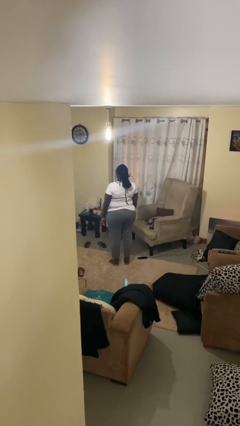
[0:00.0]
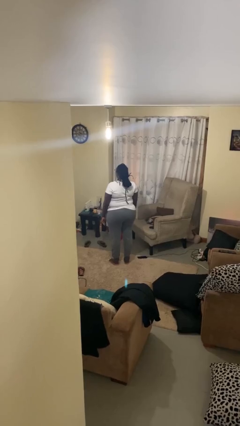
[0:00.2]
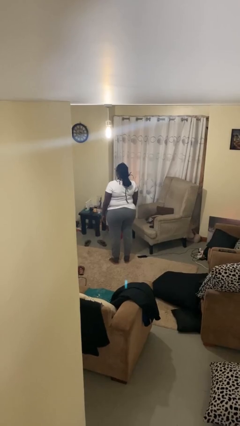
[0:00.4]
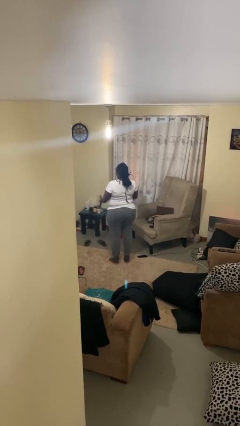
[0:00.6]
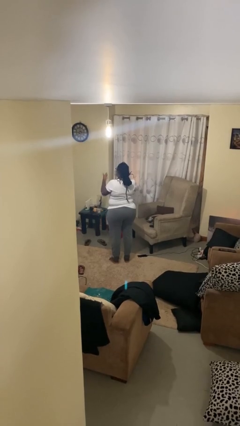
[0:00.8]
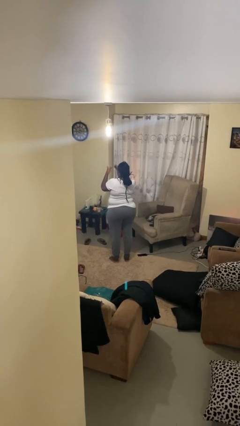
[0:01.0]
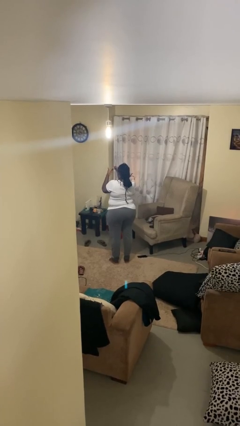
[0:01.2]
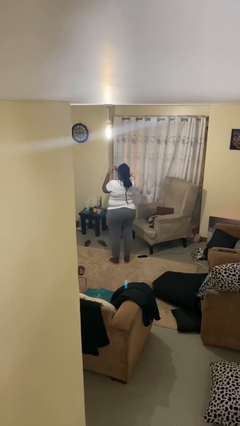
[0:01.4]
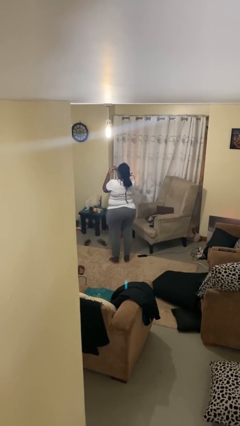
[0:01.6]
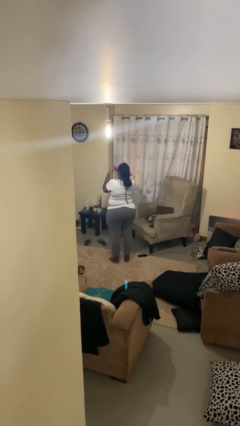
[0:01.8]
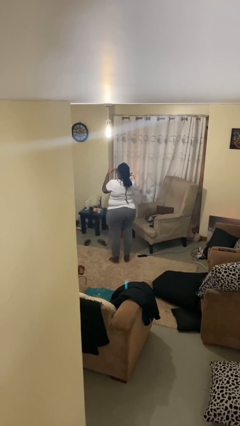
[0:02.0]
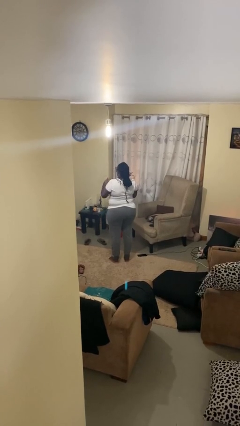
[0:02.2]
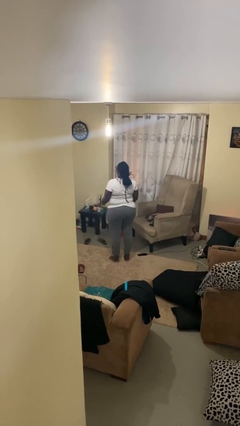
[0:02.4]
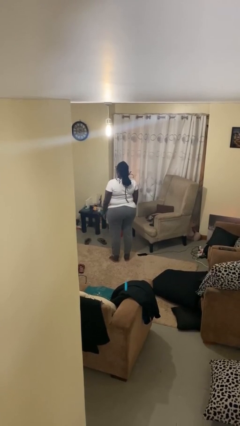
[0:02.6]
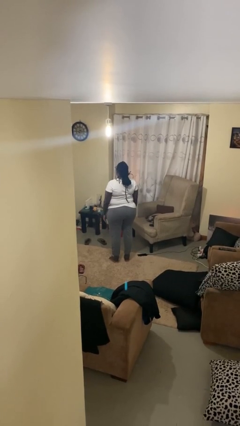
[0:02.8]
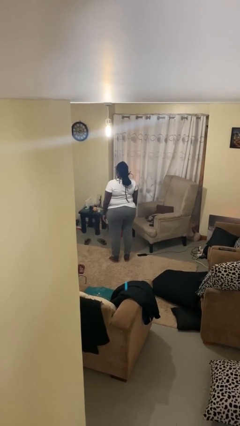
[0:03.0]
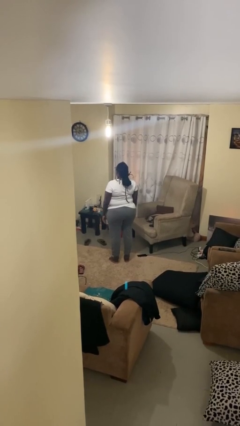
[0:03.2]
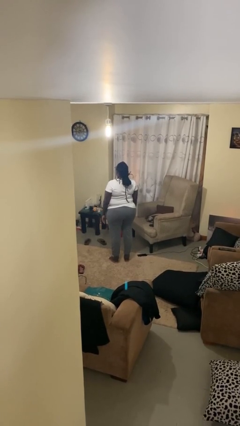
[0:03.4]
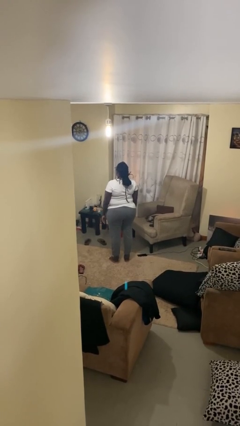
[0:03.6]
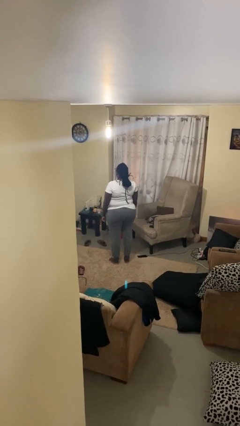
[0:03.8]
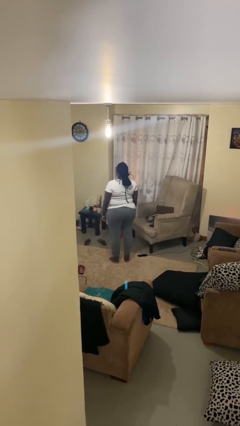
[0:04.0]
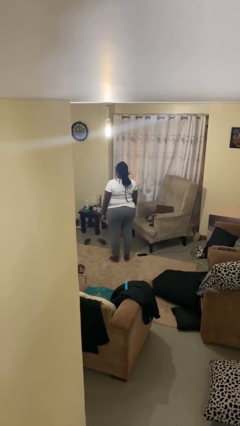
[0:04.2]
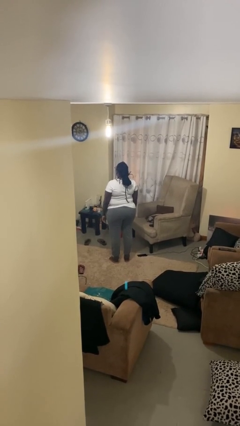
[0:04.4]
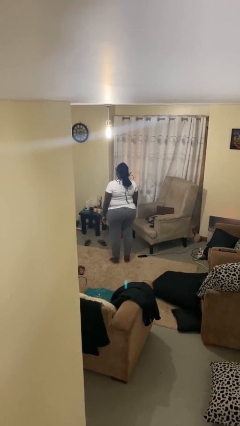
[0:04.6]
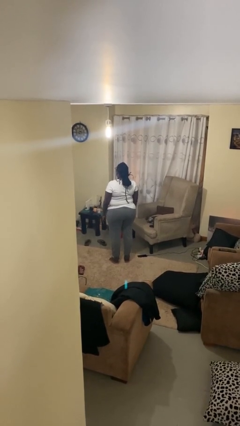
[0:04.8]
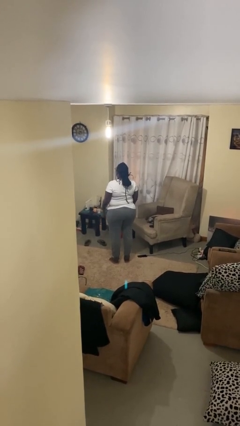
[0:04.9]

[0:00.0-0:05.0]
person puts on ring

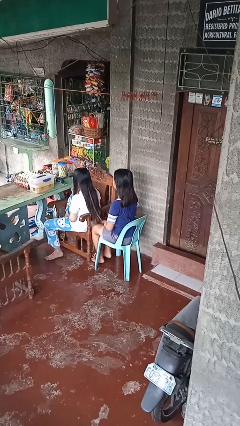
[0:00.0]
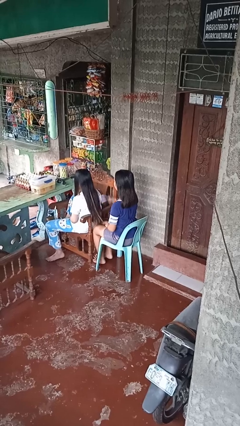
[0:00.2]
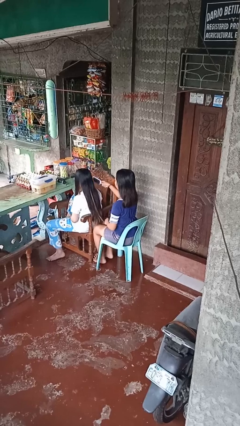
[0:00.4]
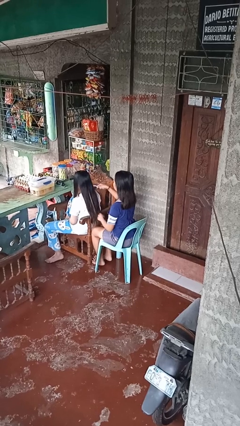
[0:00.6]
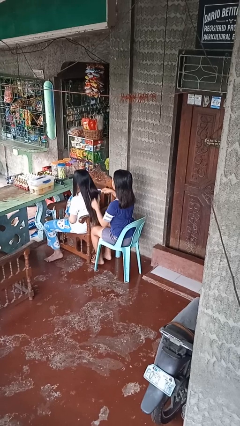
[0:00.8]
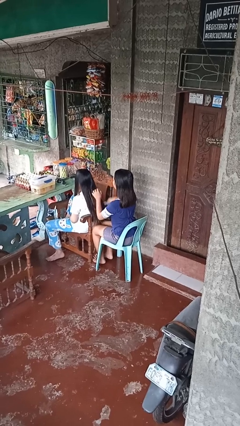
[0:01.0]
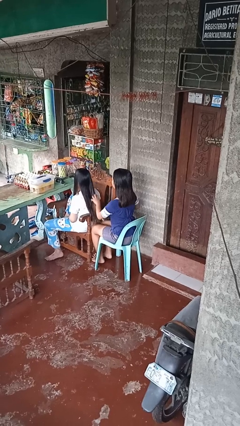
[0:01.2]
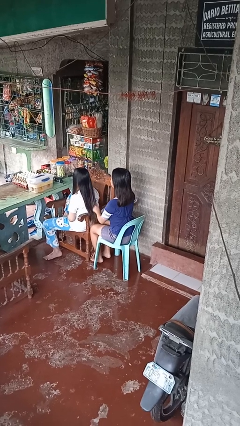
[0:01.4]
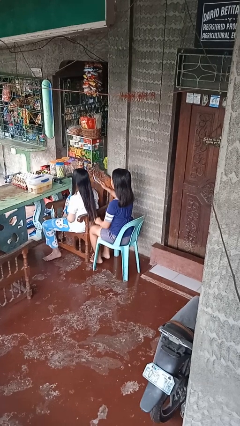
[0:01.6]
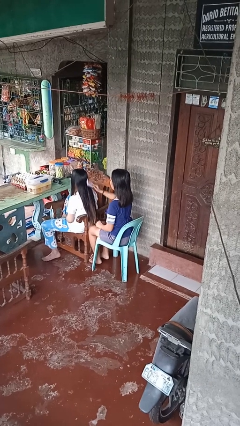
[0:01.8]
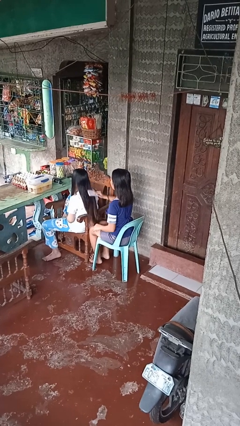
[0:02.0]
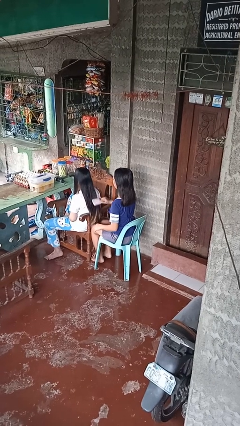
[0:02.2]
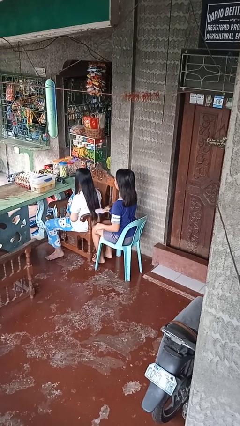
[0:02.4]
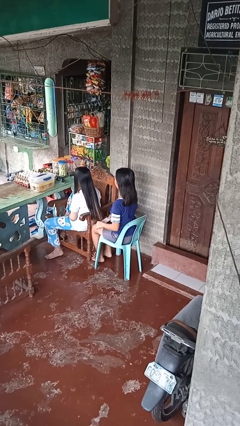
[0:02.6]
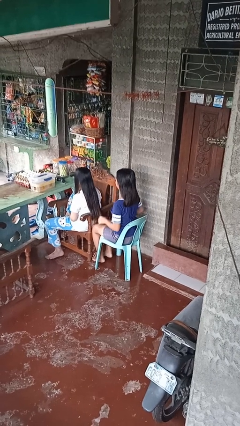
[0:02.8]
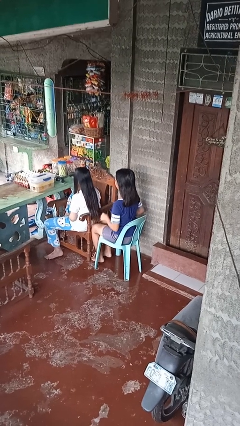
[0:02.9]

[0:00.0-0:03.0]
person brushes hair of person

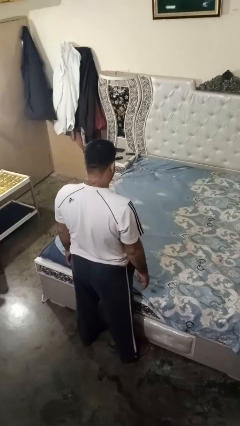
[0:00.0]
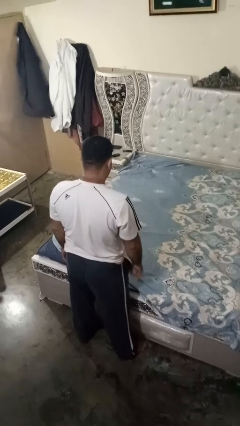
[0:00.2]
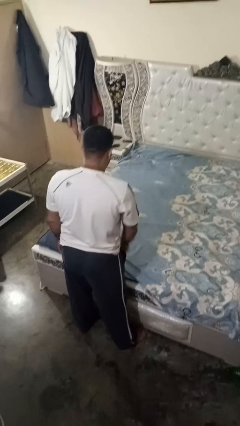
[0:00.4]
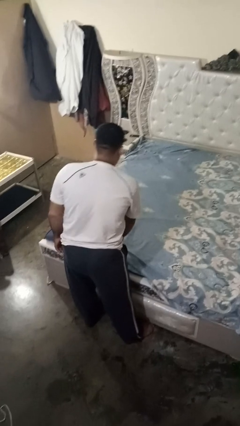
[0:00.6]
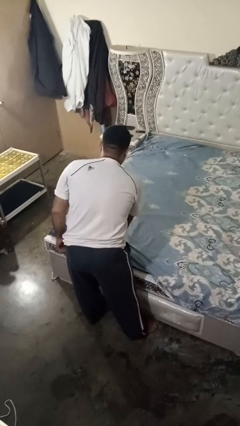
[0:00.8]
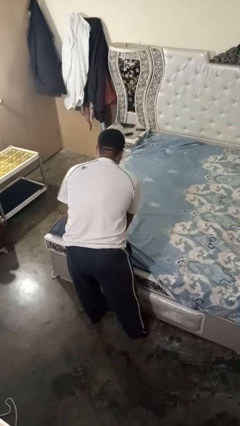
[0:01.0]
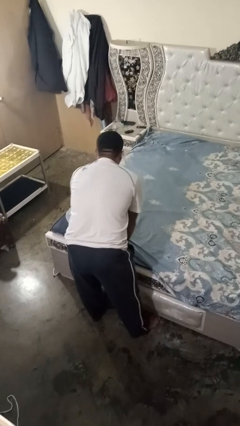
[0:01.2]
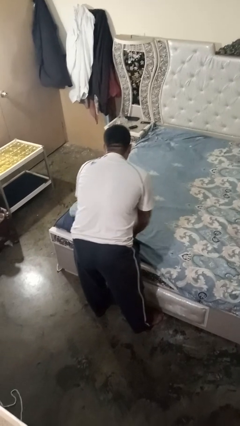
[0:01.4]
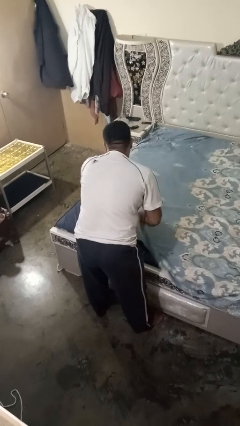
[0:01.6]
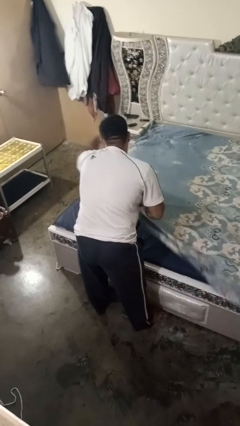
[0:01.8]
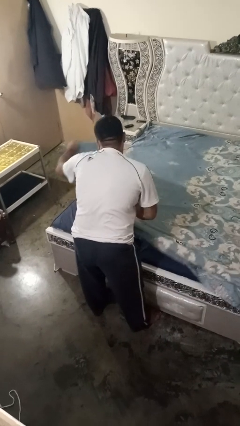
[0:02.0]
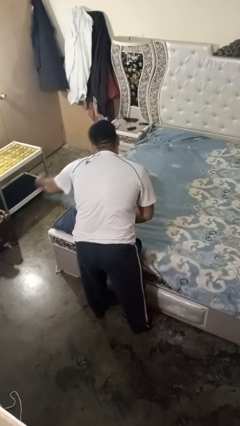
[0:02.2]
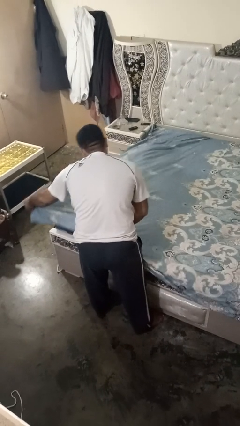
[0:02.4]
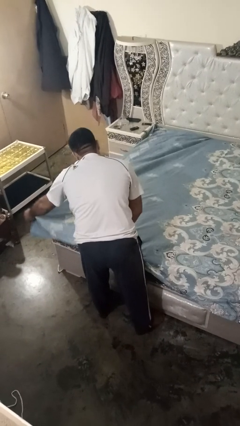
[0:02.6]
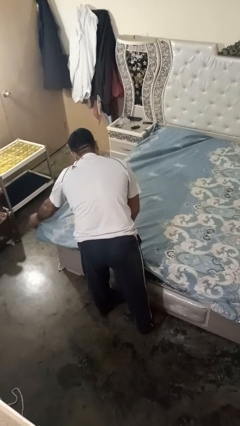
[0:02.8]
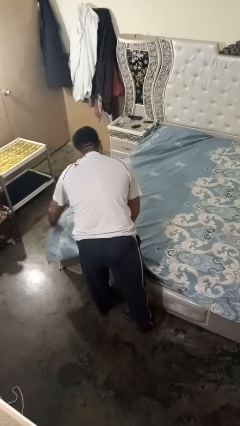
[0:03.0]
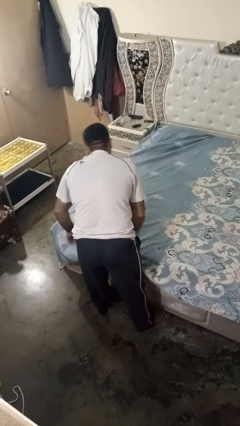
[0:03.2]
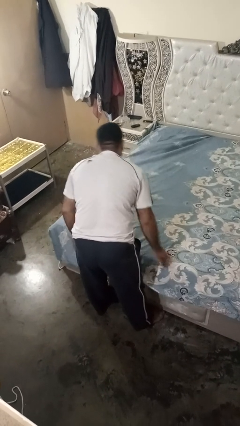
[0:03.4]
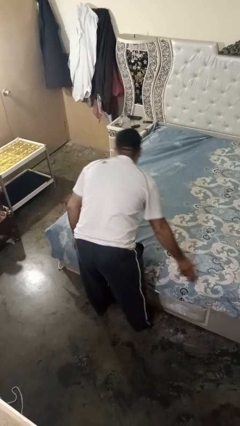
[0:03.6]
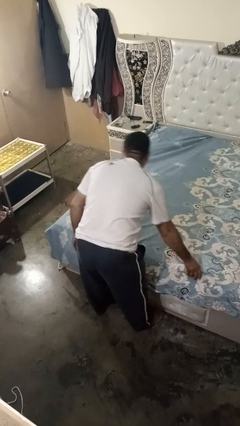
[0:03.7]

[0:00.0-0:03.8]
person makes bed

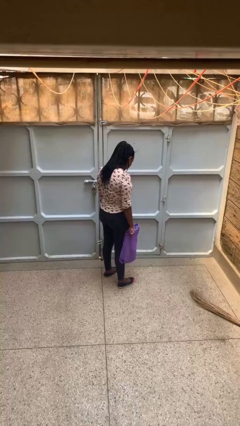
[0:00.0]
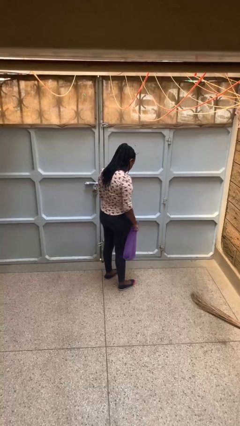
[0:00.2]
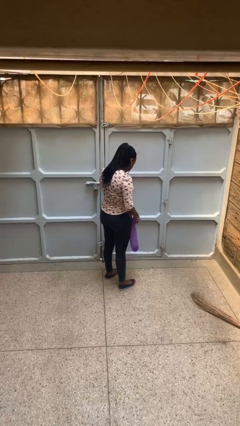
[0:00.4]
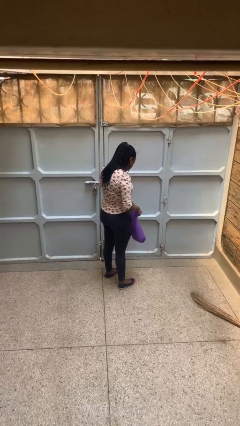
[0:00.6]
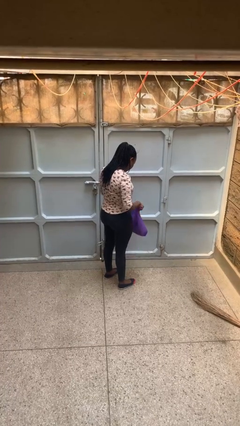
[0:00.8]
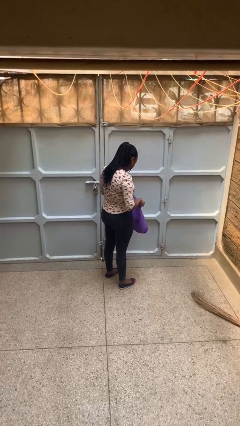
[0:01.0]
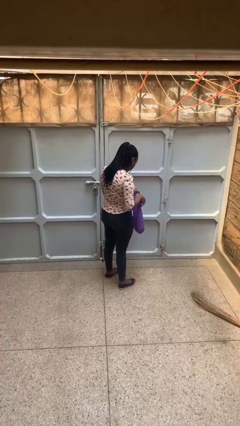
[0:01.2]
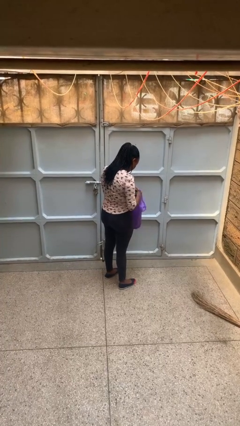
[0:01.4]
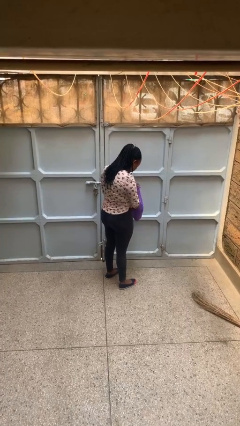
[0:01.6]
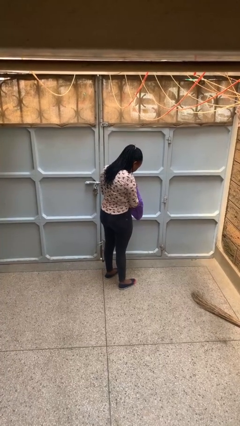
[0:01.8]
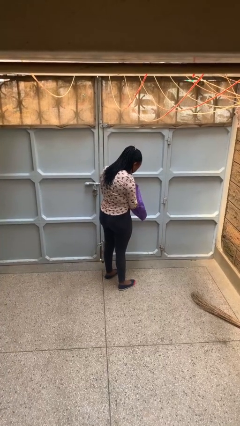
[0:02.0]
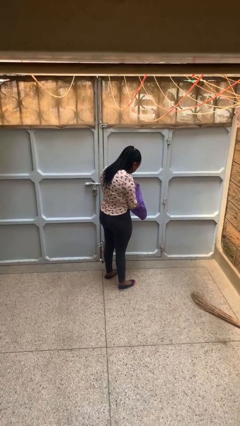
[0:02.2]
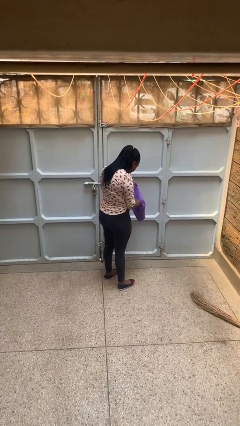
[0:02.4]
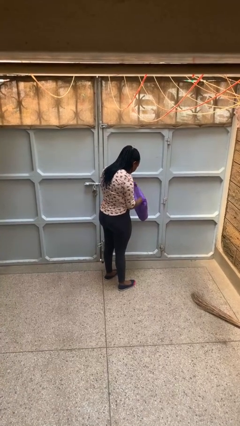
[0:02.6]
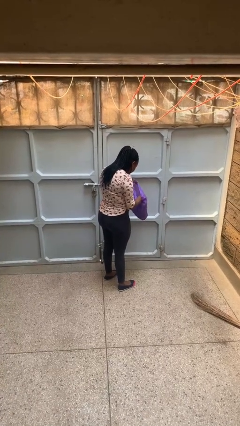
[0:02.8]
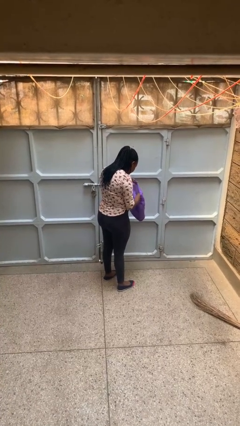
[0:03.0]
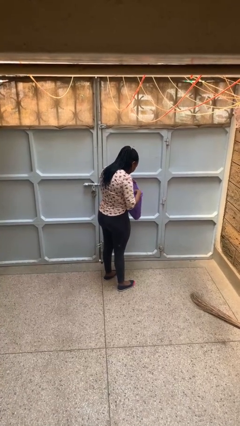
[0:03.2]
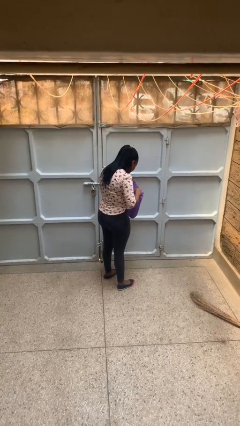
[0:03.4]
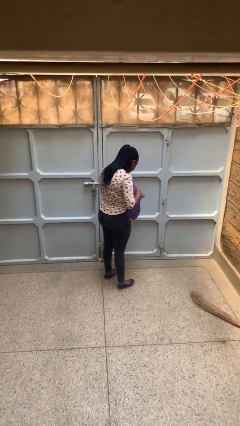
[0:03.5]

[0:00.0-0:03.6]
person searches in bag

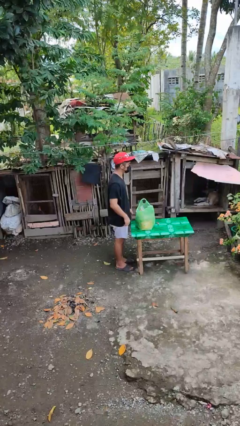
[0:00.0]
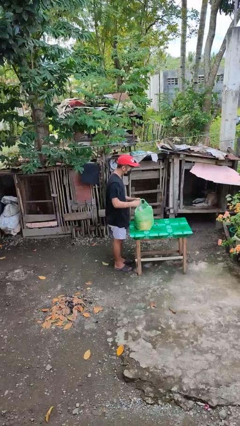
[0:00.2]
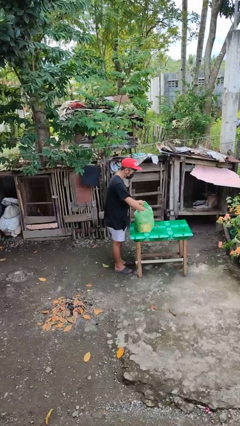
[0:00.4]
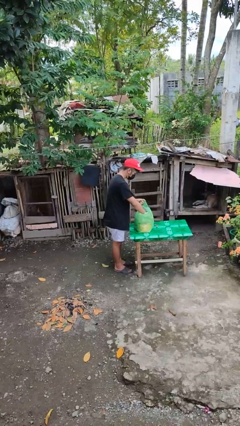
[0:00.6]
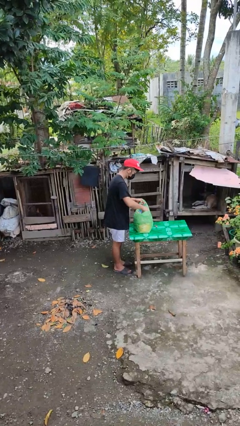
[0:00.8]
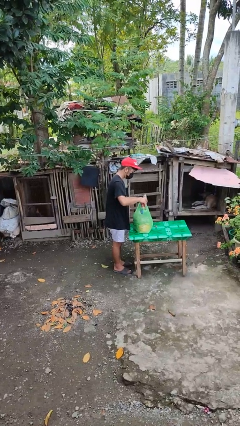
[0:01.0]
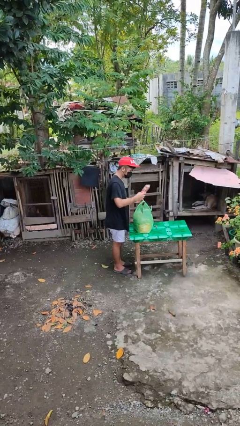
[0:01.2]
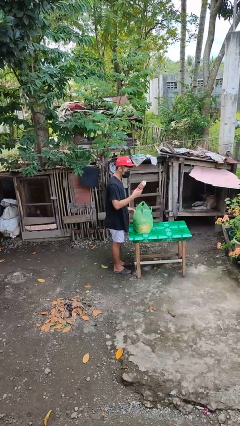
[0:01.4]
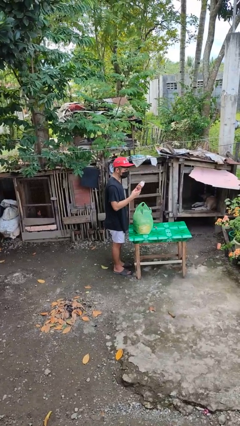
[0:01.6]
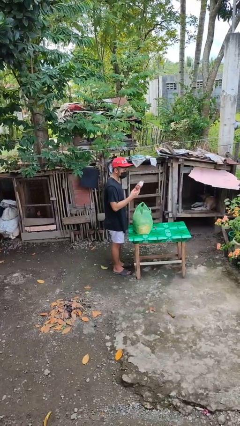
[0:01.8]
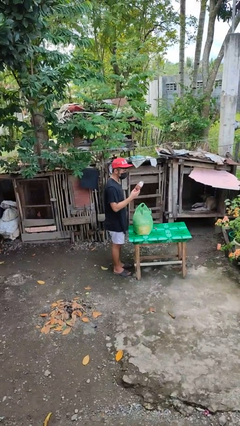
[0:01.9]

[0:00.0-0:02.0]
person takes object from bag
